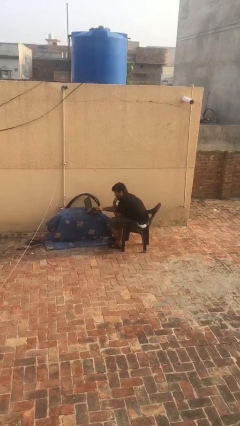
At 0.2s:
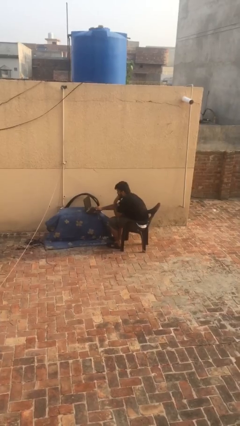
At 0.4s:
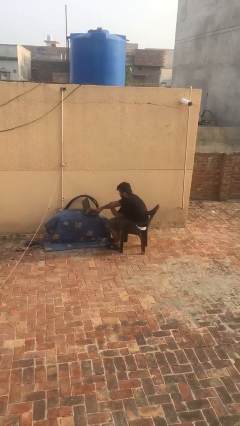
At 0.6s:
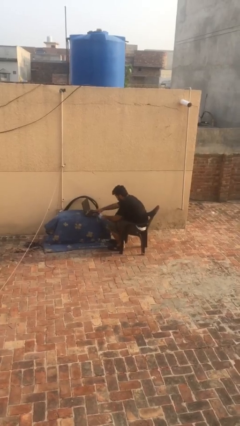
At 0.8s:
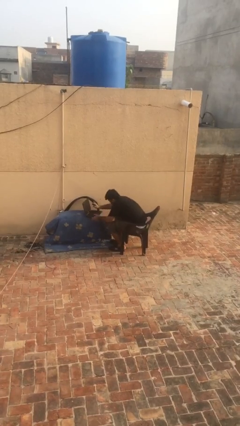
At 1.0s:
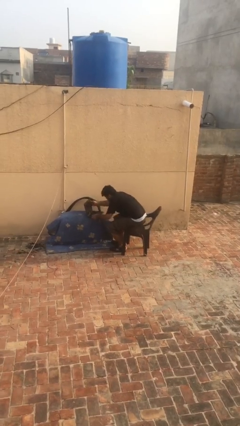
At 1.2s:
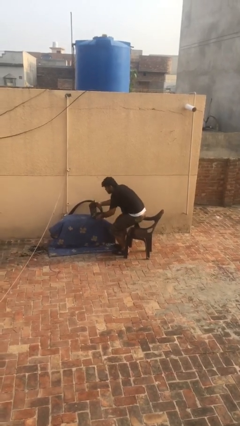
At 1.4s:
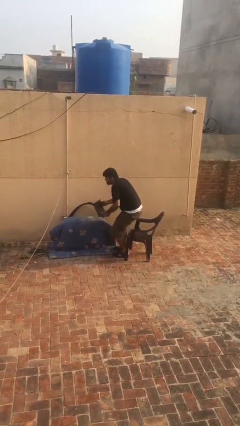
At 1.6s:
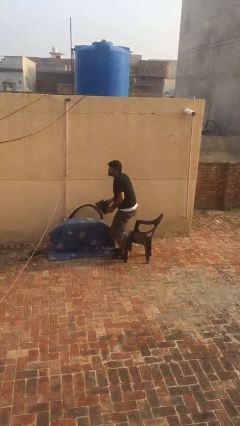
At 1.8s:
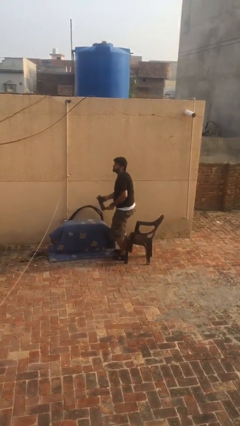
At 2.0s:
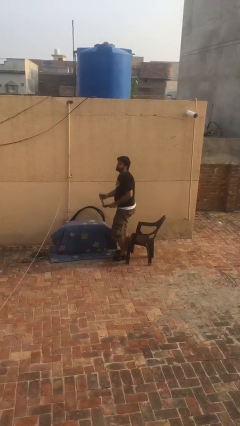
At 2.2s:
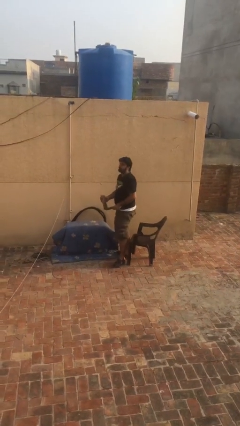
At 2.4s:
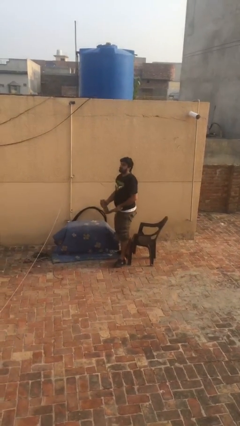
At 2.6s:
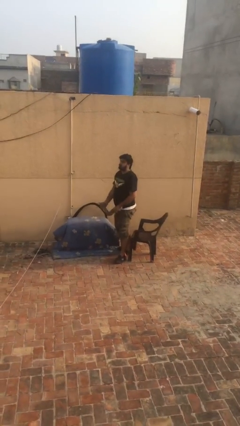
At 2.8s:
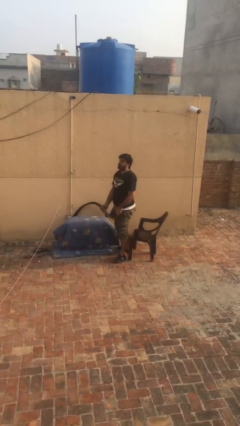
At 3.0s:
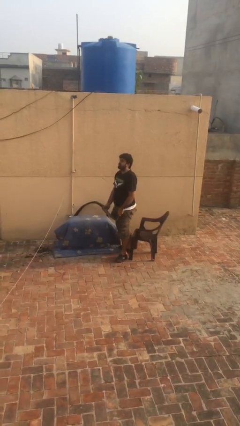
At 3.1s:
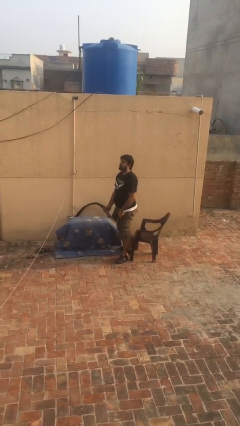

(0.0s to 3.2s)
person stands up

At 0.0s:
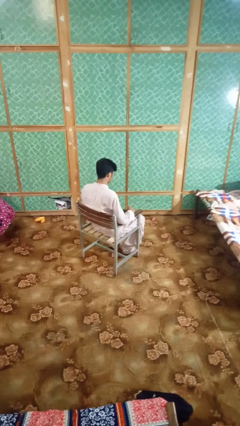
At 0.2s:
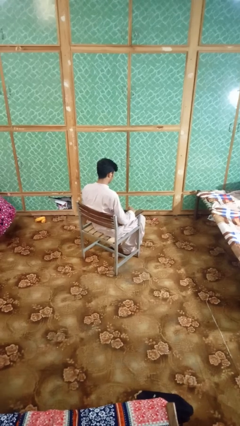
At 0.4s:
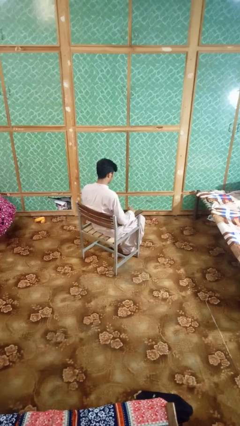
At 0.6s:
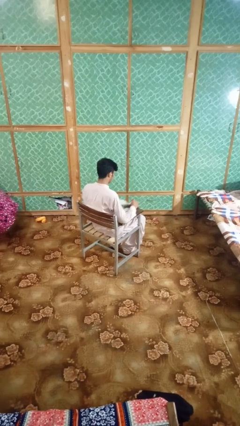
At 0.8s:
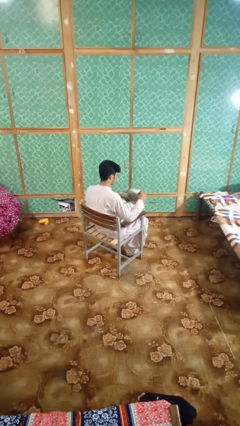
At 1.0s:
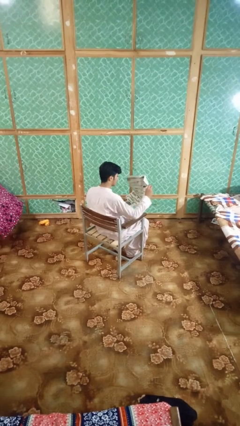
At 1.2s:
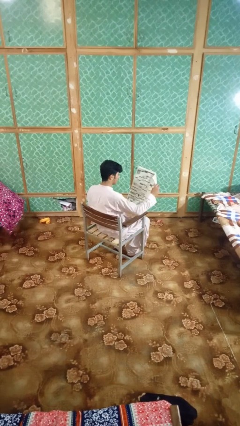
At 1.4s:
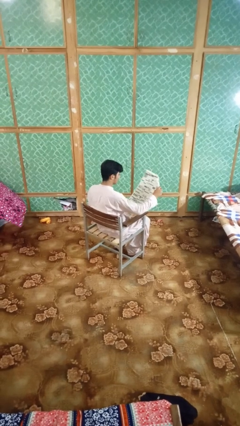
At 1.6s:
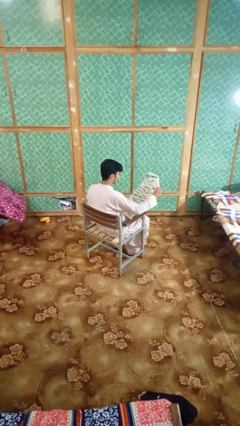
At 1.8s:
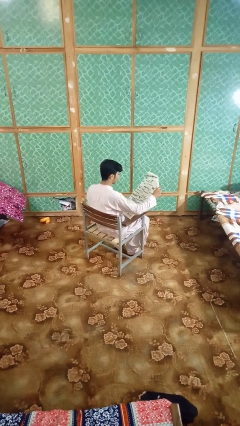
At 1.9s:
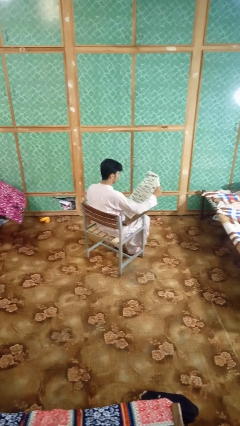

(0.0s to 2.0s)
person reads newspaper

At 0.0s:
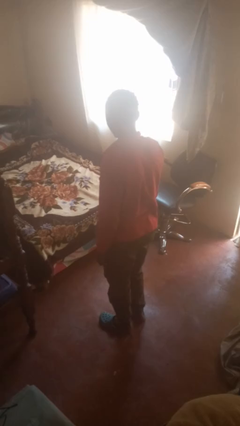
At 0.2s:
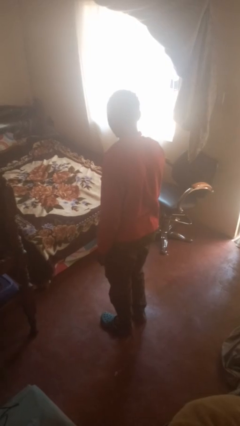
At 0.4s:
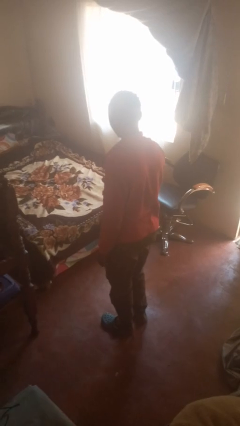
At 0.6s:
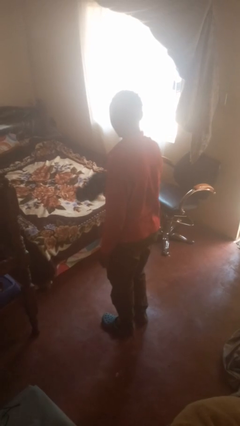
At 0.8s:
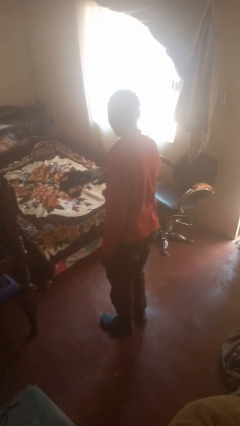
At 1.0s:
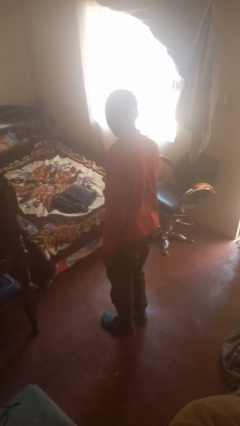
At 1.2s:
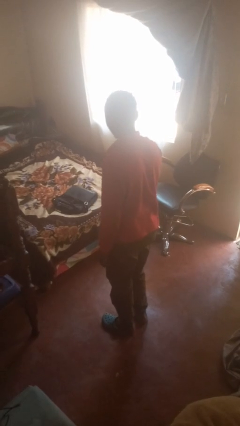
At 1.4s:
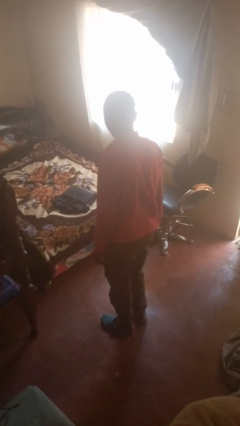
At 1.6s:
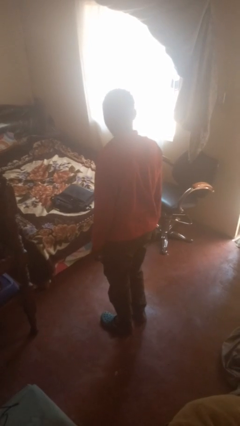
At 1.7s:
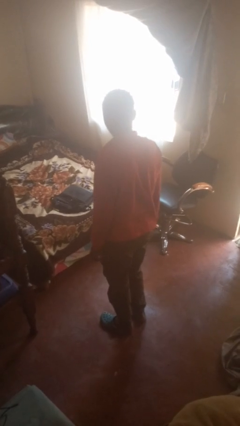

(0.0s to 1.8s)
person throws object on bed

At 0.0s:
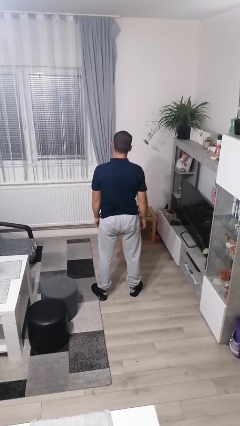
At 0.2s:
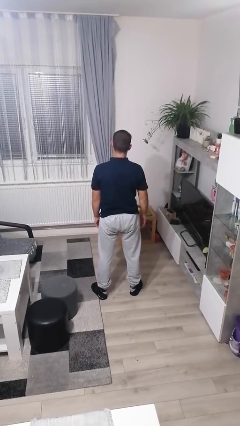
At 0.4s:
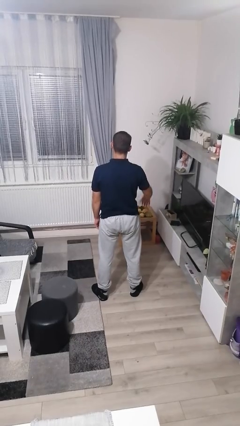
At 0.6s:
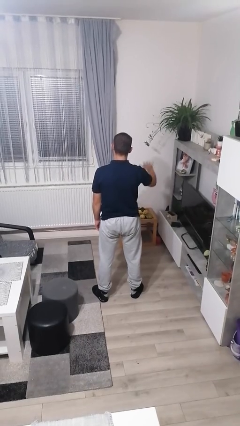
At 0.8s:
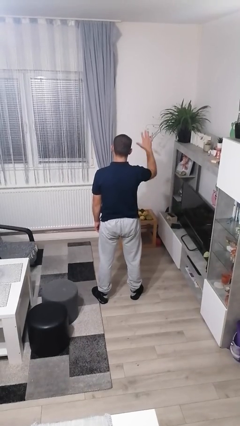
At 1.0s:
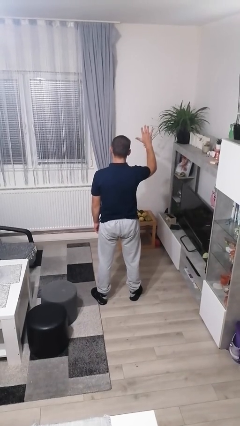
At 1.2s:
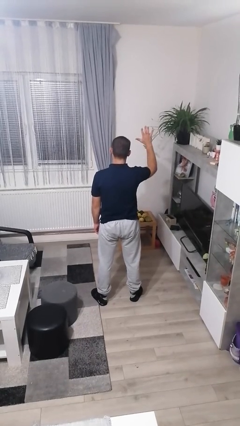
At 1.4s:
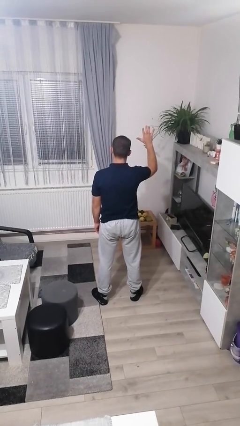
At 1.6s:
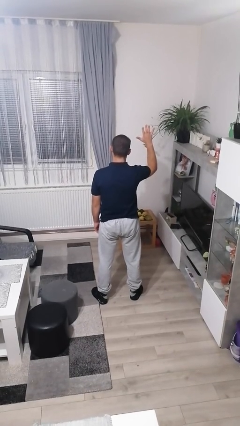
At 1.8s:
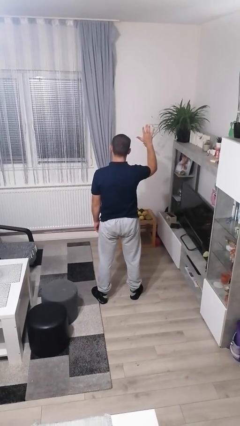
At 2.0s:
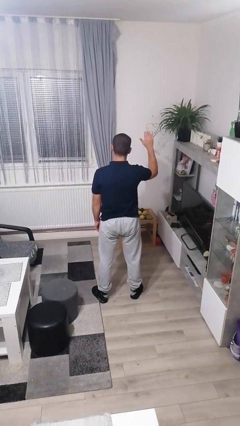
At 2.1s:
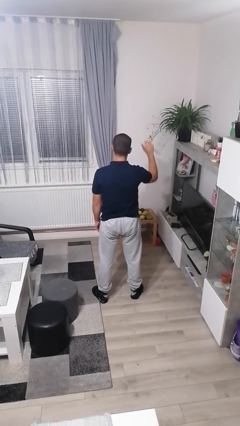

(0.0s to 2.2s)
person gestures number five

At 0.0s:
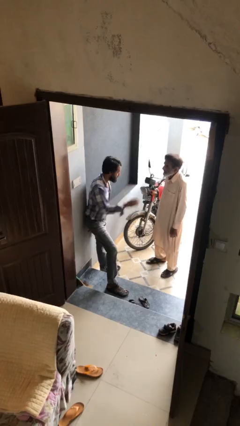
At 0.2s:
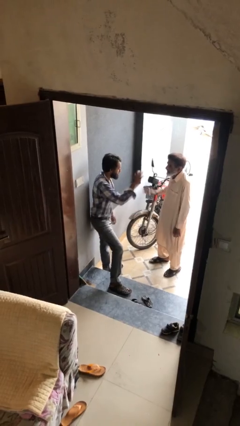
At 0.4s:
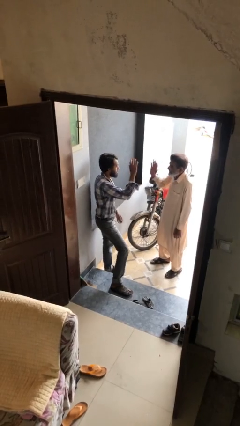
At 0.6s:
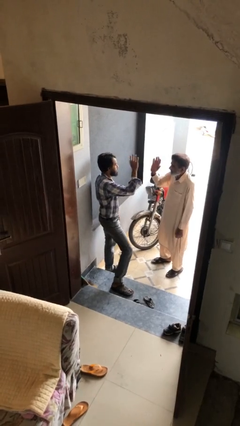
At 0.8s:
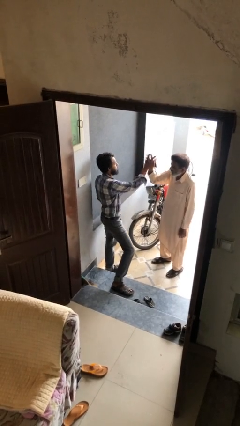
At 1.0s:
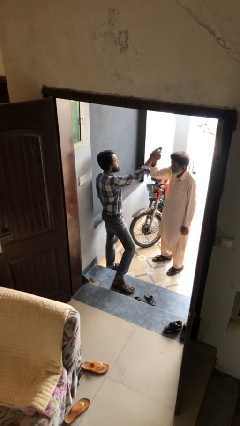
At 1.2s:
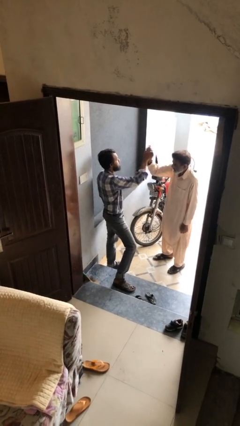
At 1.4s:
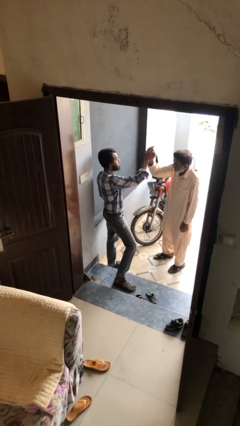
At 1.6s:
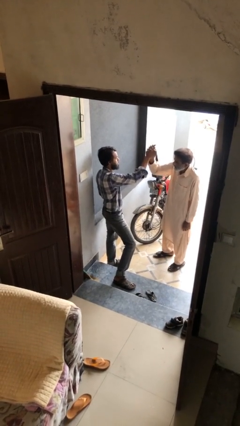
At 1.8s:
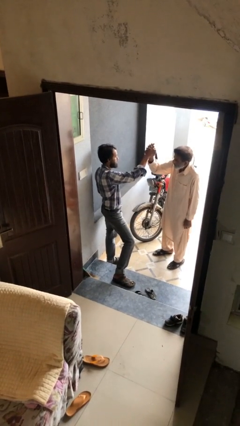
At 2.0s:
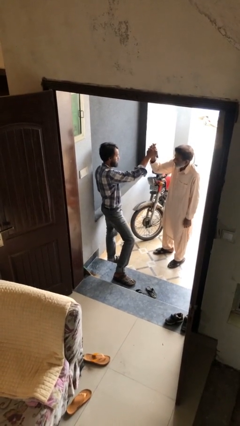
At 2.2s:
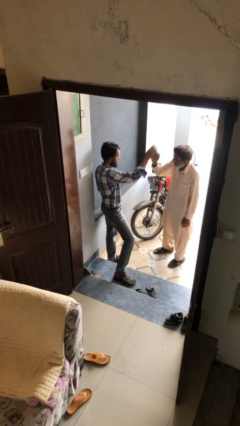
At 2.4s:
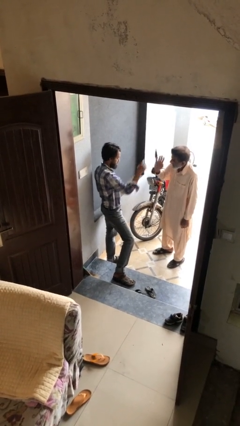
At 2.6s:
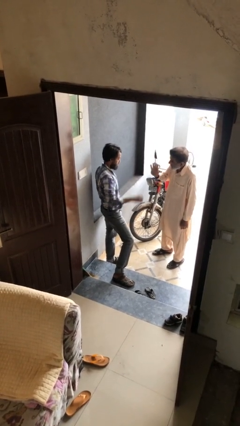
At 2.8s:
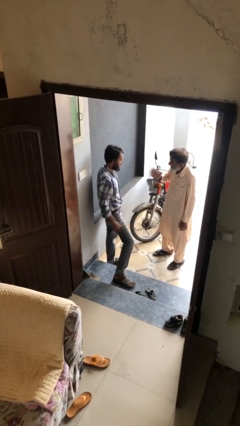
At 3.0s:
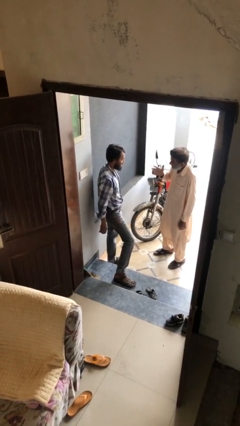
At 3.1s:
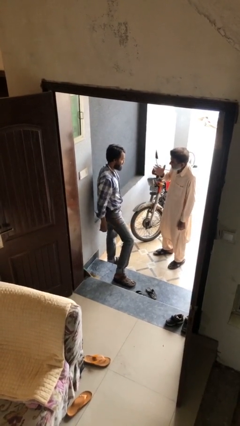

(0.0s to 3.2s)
person highfives hand

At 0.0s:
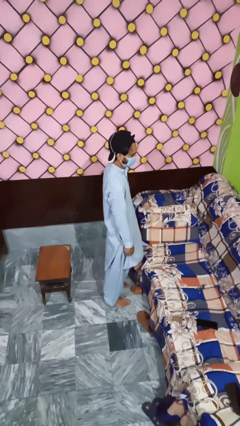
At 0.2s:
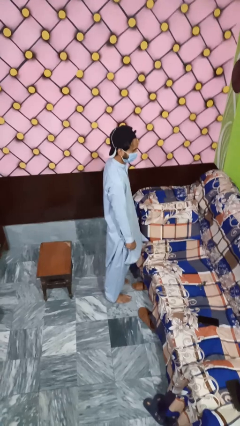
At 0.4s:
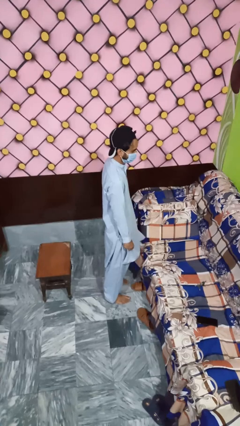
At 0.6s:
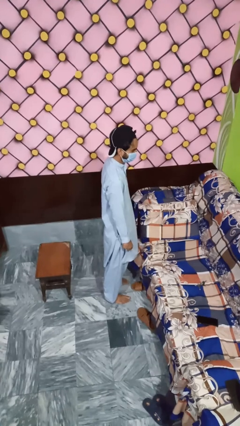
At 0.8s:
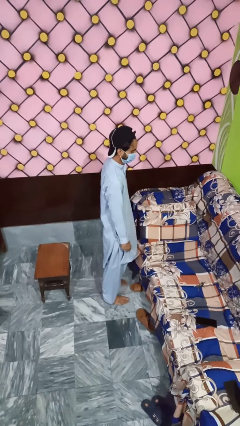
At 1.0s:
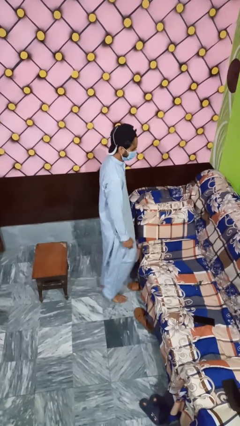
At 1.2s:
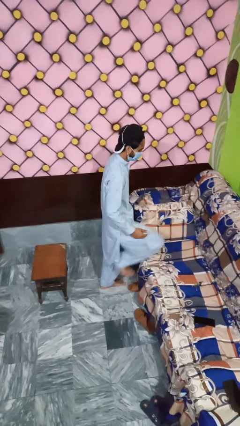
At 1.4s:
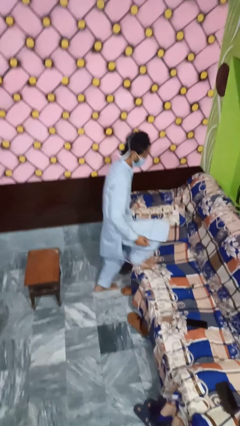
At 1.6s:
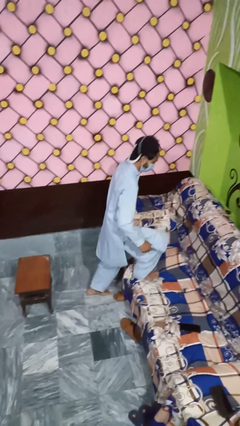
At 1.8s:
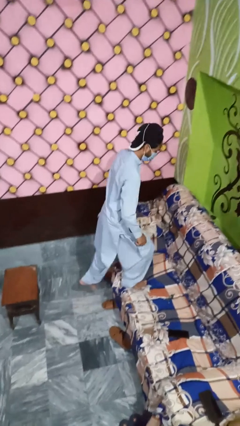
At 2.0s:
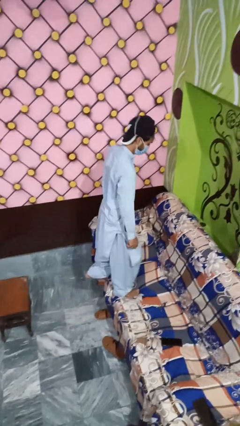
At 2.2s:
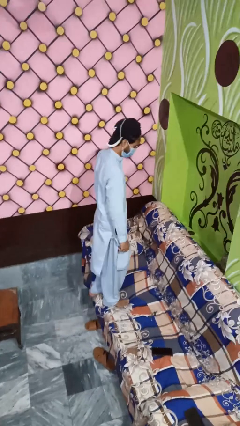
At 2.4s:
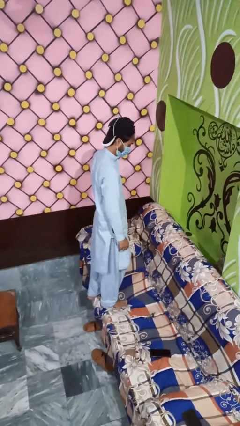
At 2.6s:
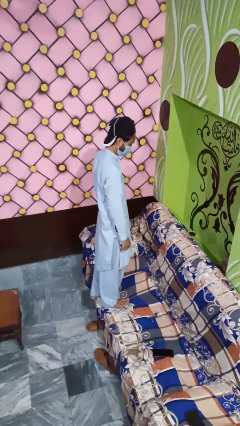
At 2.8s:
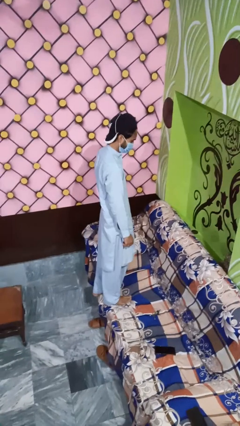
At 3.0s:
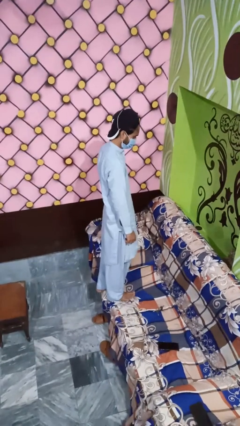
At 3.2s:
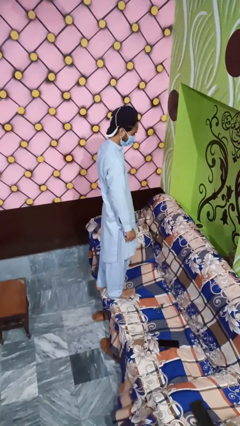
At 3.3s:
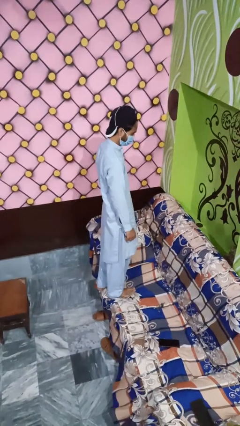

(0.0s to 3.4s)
person climbs on couch

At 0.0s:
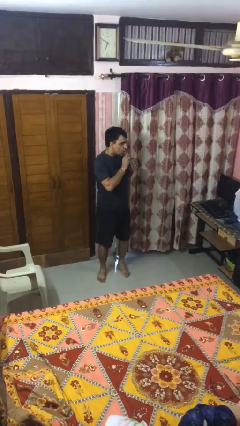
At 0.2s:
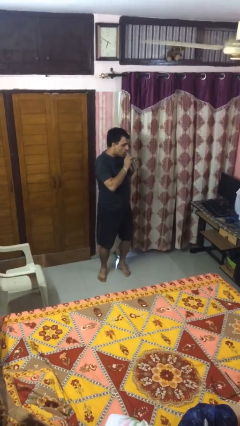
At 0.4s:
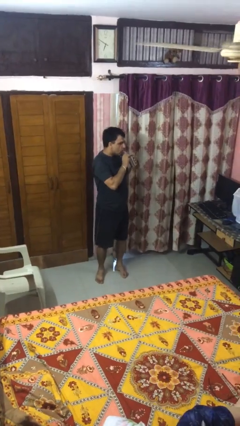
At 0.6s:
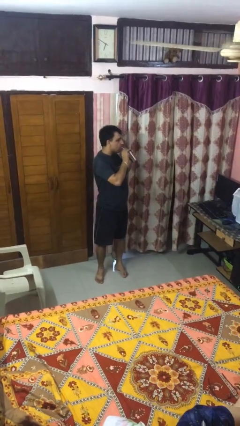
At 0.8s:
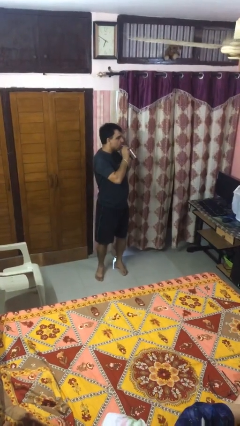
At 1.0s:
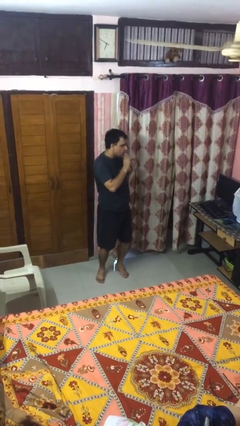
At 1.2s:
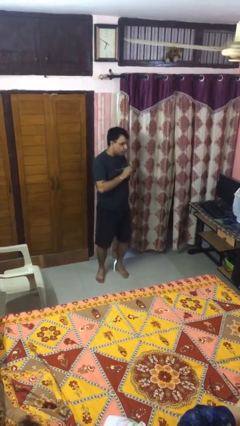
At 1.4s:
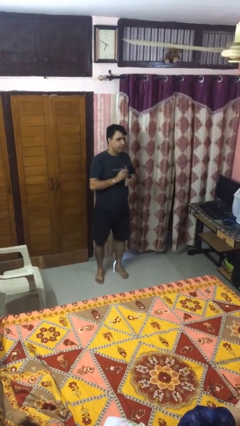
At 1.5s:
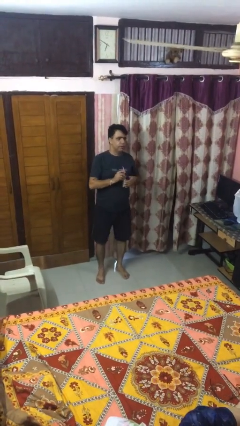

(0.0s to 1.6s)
person drinks from straw
